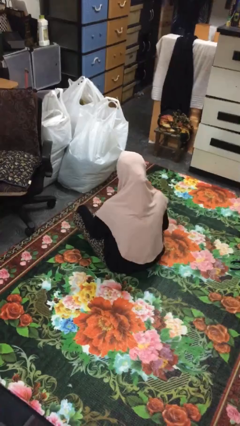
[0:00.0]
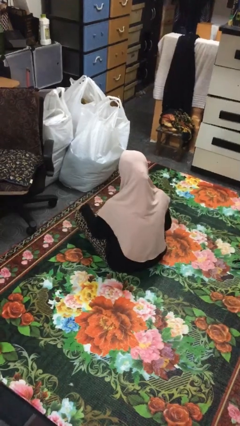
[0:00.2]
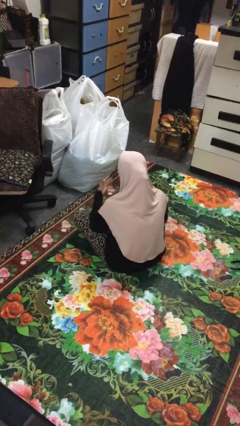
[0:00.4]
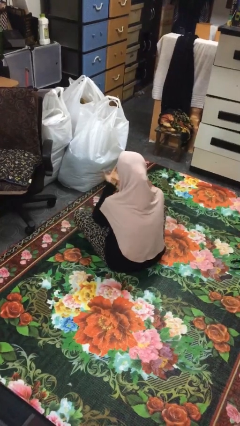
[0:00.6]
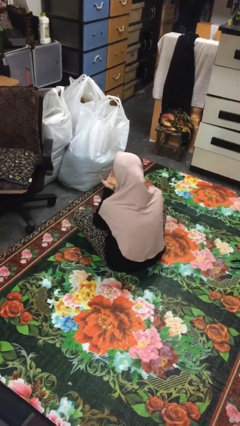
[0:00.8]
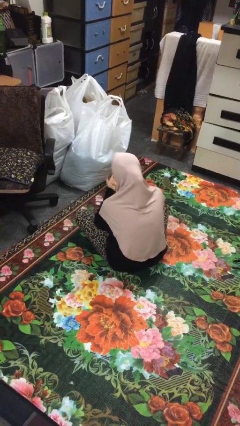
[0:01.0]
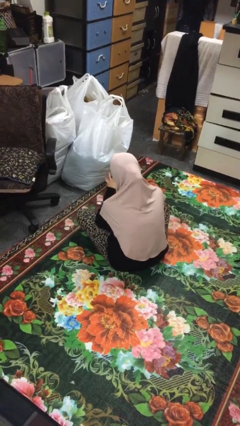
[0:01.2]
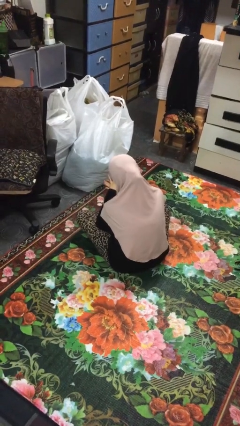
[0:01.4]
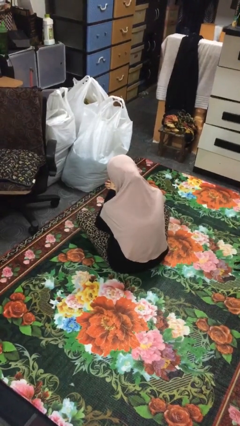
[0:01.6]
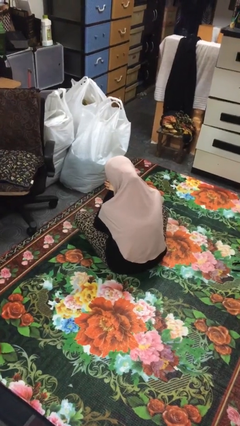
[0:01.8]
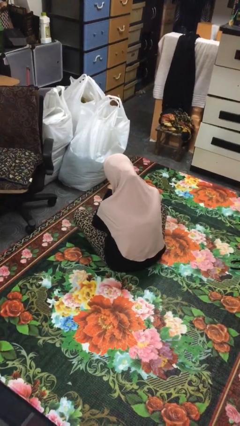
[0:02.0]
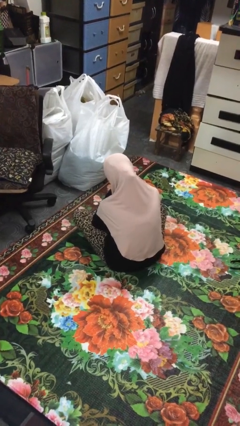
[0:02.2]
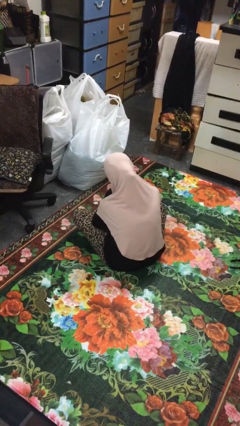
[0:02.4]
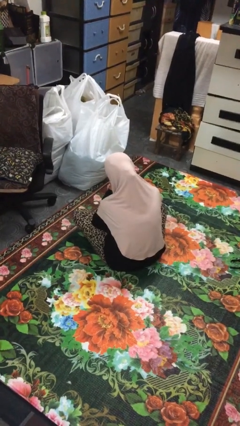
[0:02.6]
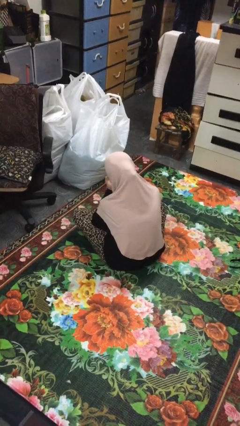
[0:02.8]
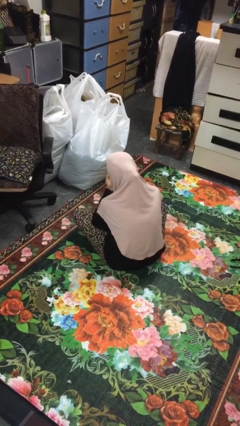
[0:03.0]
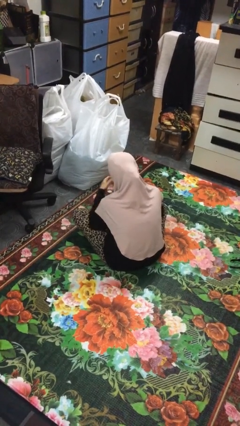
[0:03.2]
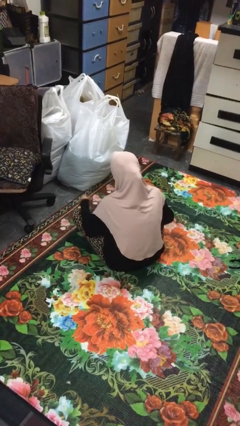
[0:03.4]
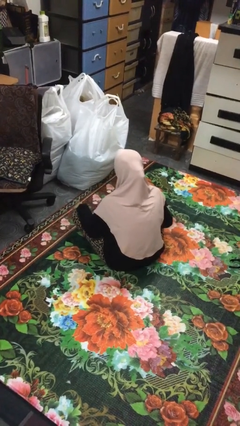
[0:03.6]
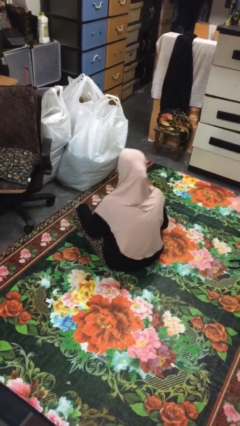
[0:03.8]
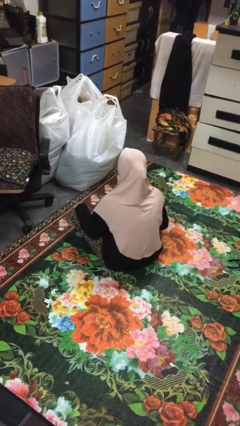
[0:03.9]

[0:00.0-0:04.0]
person looks at hands in lap

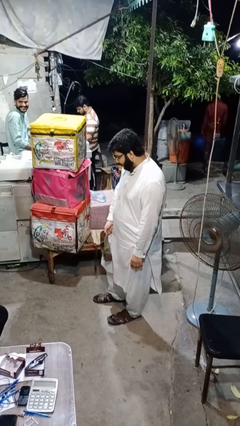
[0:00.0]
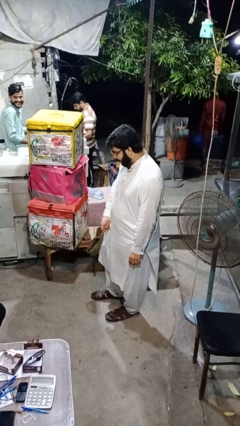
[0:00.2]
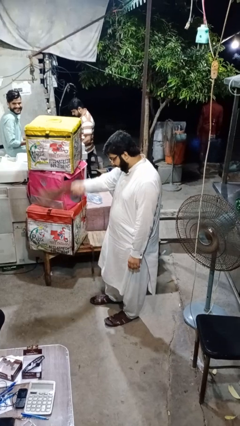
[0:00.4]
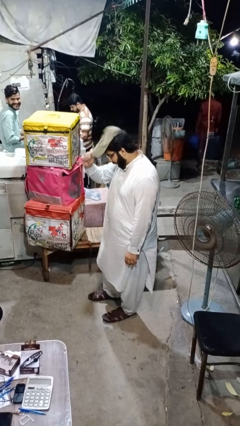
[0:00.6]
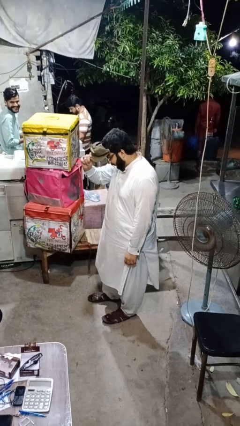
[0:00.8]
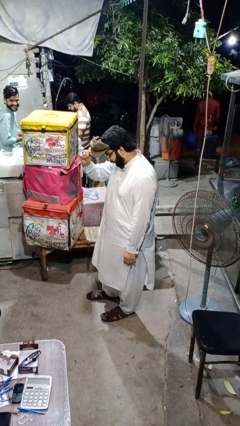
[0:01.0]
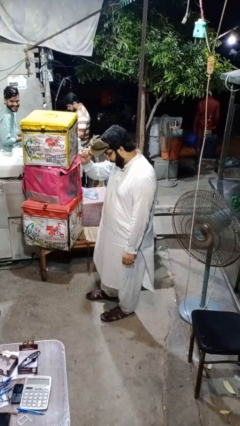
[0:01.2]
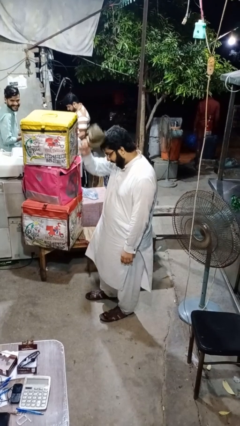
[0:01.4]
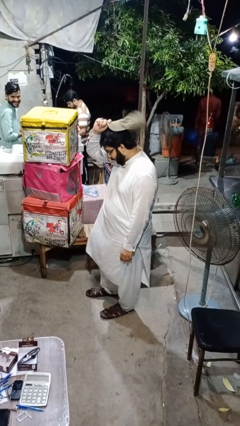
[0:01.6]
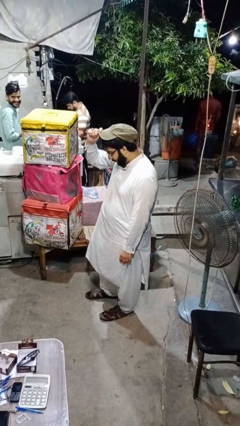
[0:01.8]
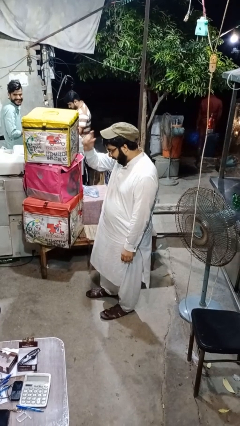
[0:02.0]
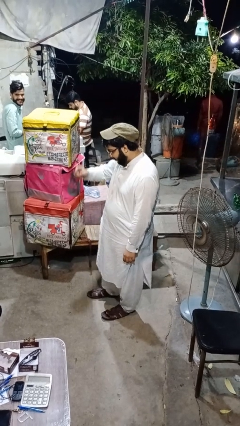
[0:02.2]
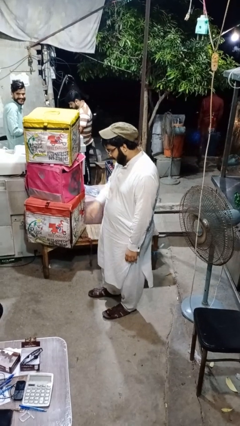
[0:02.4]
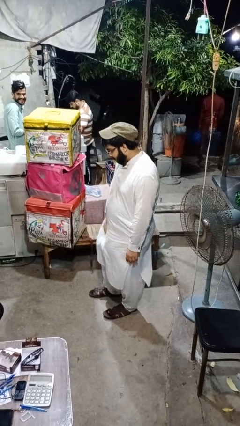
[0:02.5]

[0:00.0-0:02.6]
person puts on hat

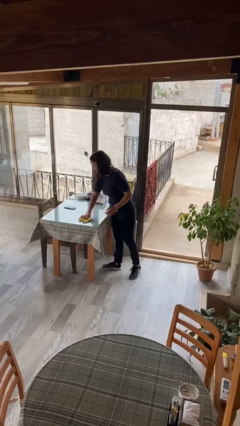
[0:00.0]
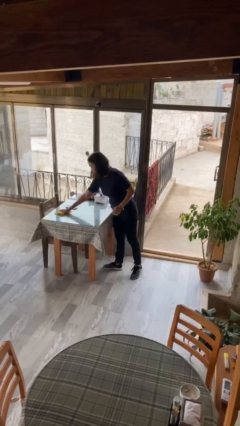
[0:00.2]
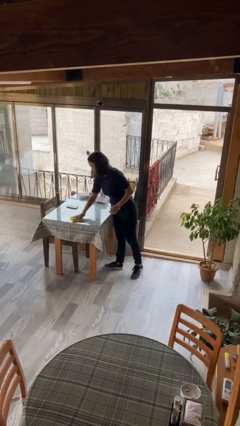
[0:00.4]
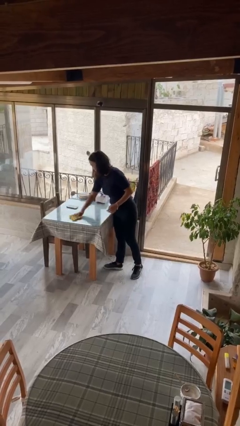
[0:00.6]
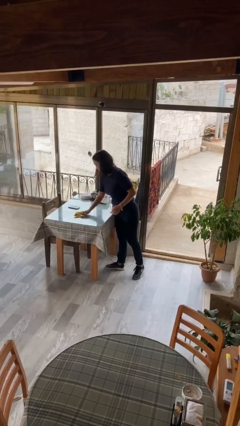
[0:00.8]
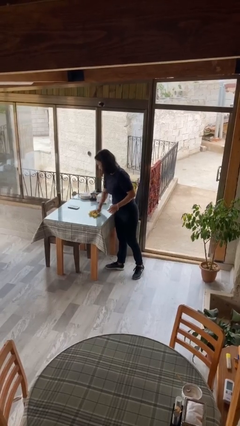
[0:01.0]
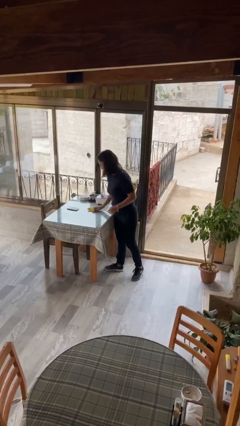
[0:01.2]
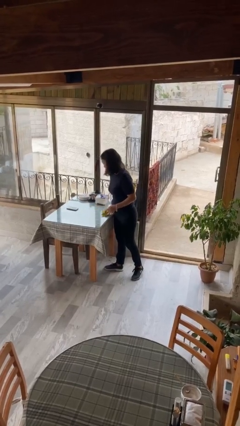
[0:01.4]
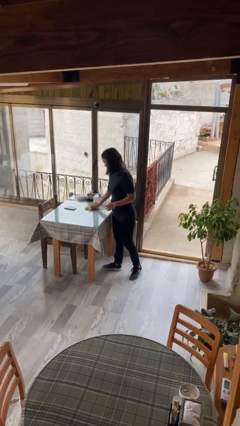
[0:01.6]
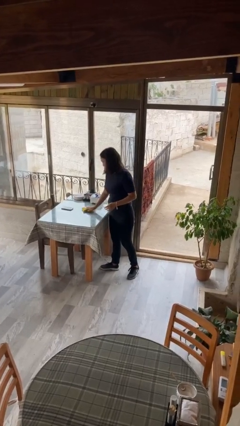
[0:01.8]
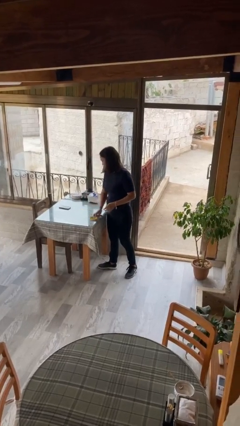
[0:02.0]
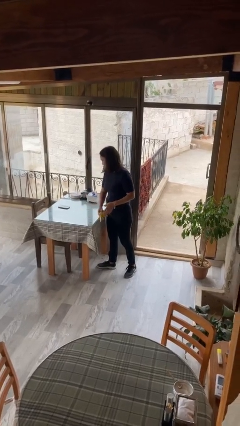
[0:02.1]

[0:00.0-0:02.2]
person cleans table with rag

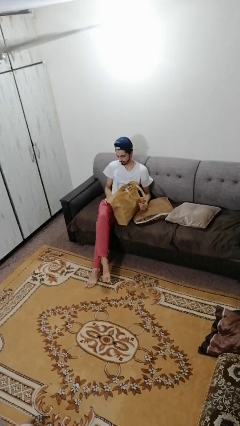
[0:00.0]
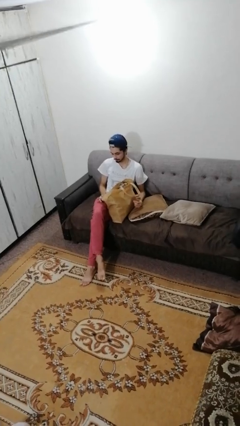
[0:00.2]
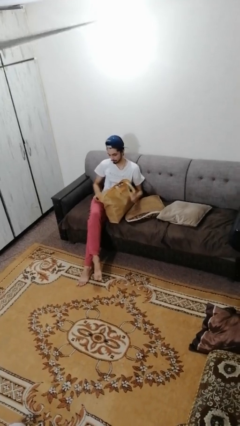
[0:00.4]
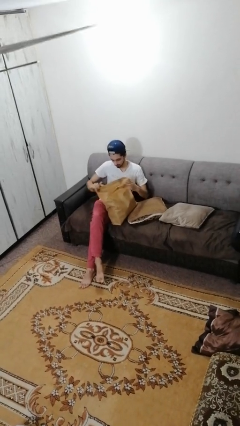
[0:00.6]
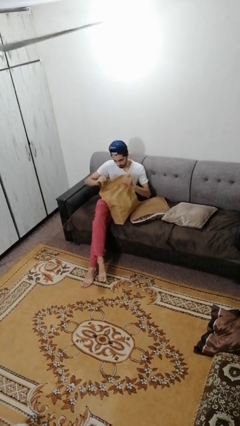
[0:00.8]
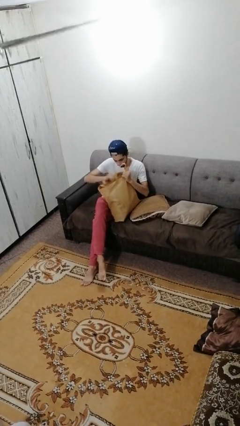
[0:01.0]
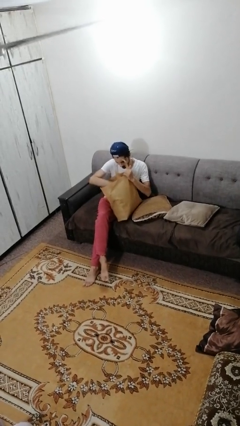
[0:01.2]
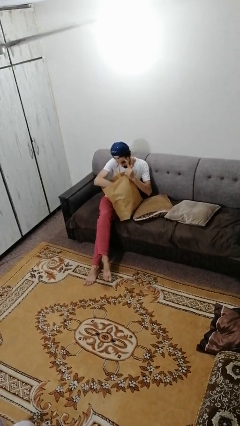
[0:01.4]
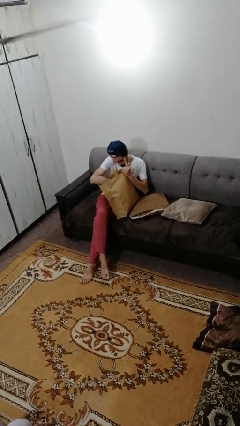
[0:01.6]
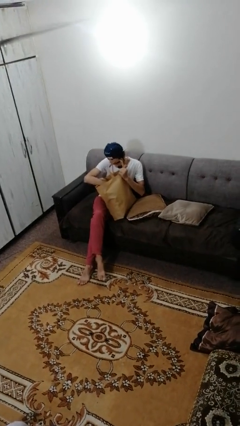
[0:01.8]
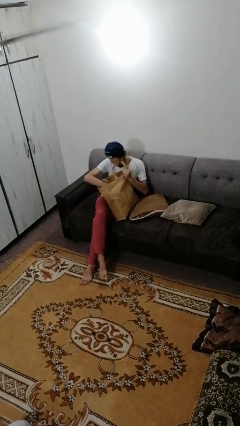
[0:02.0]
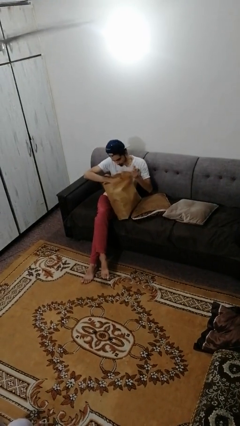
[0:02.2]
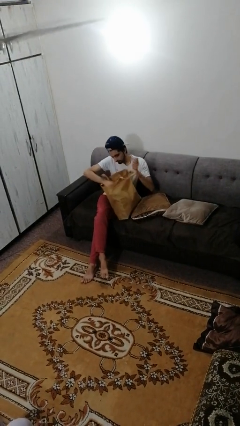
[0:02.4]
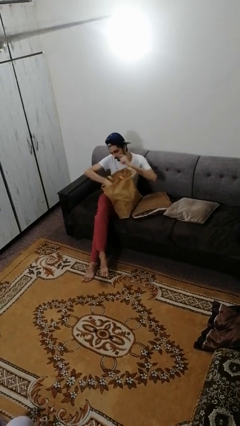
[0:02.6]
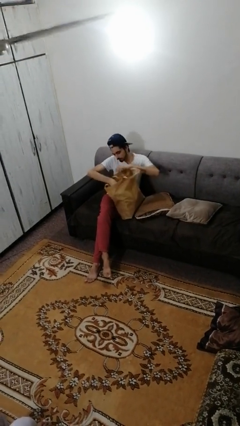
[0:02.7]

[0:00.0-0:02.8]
person searches in bag

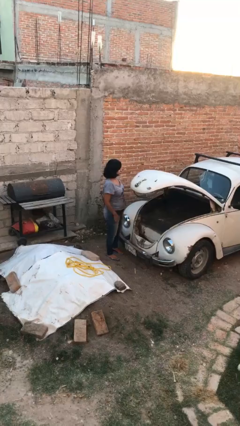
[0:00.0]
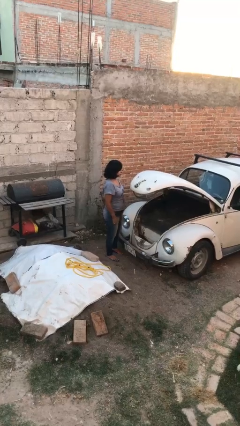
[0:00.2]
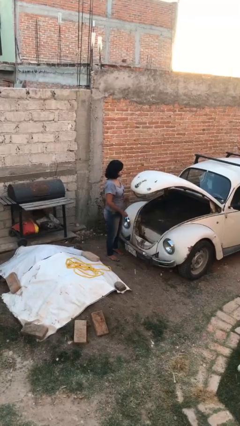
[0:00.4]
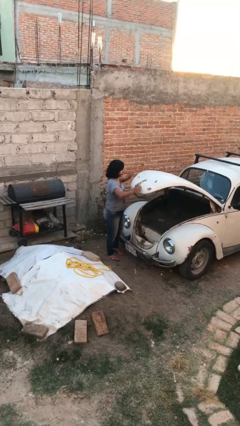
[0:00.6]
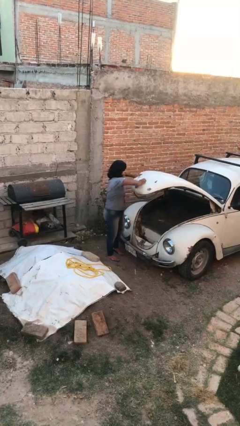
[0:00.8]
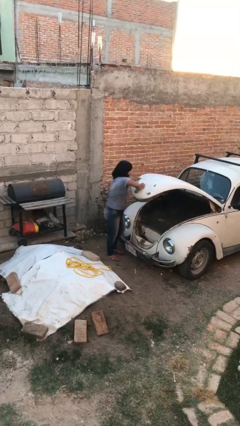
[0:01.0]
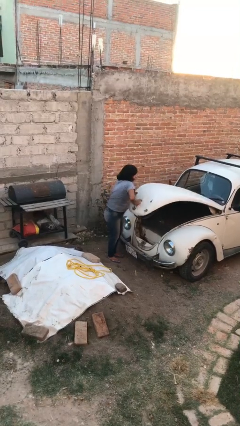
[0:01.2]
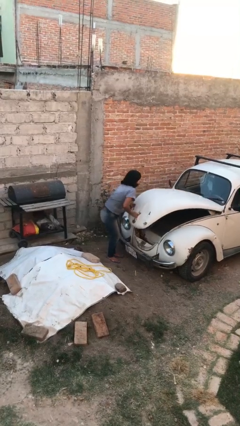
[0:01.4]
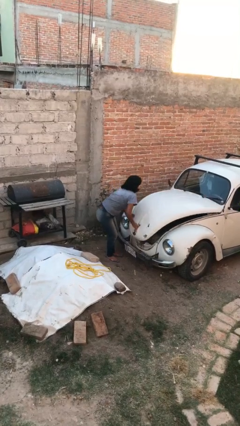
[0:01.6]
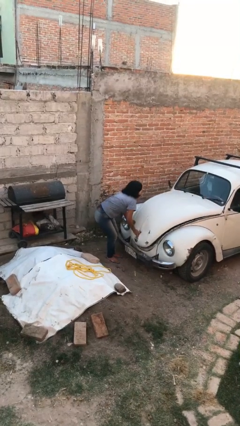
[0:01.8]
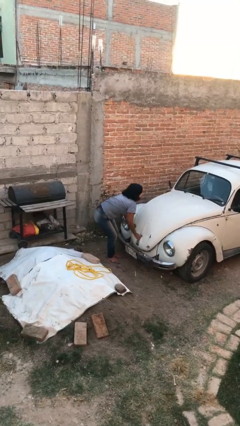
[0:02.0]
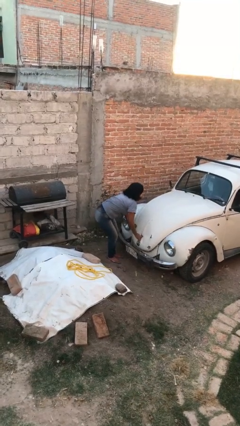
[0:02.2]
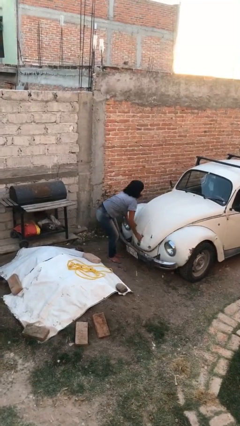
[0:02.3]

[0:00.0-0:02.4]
person closes car trunk

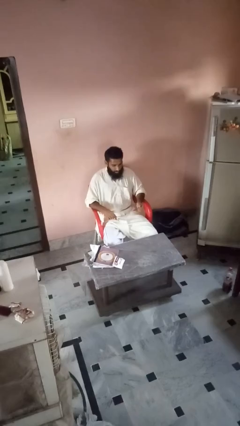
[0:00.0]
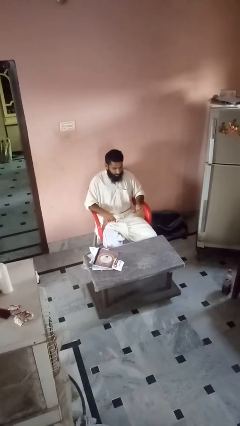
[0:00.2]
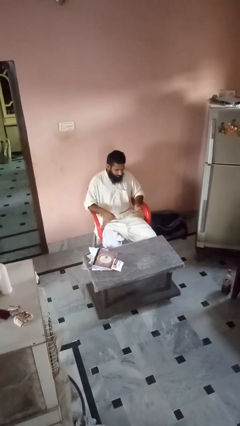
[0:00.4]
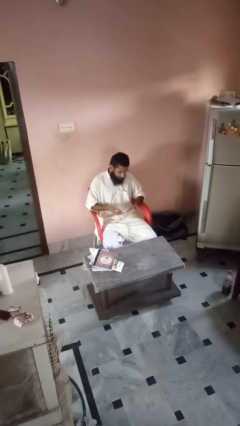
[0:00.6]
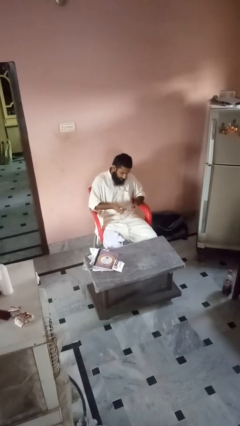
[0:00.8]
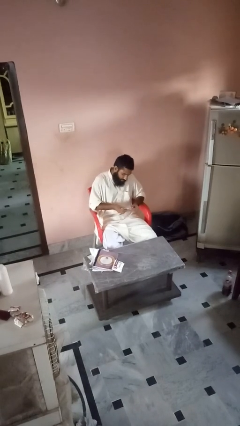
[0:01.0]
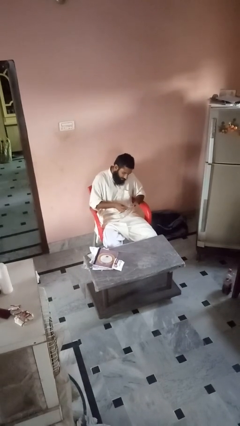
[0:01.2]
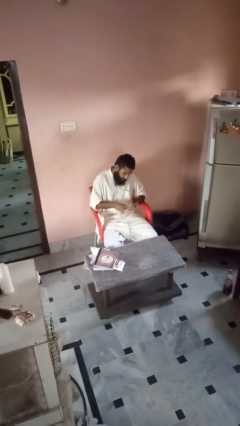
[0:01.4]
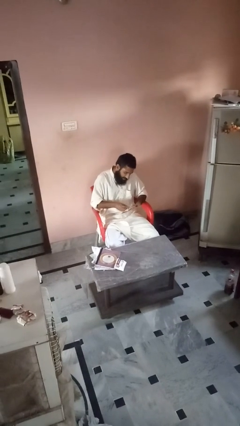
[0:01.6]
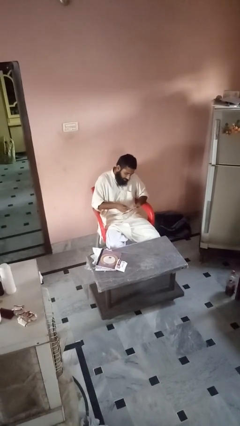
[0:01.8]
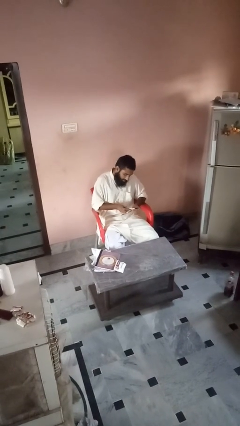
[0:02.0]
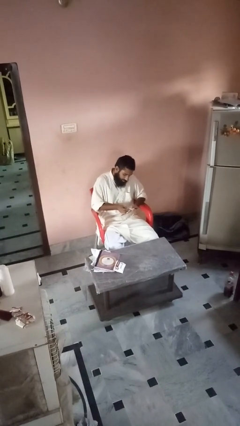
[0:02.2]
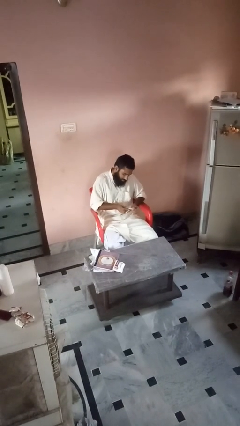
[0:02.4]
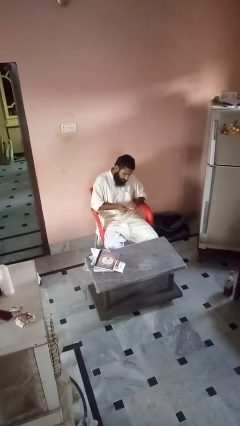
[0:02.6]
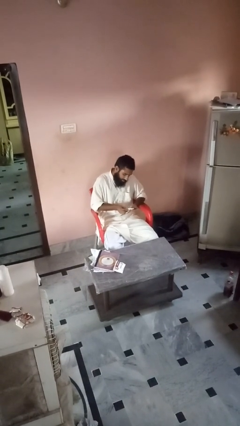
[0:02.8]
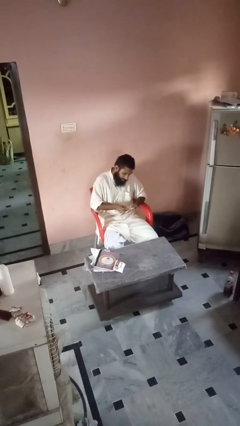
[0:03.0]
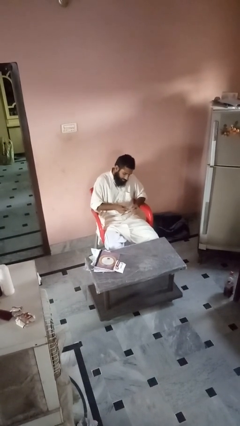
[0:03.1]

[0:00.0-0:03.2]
person files fingernails

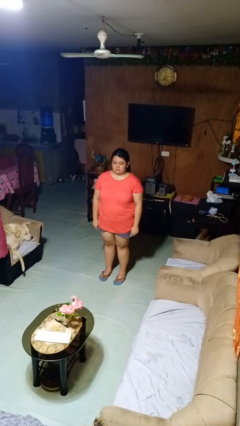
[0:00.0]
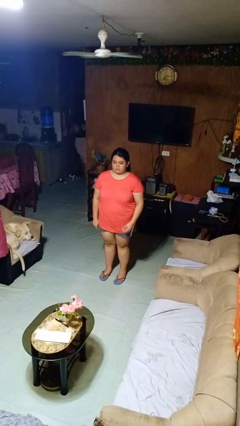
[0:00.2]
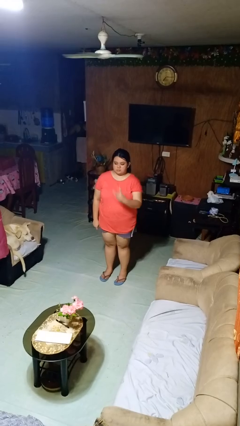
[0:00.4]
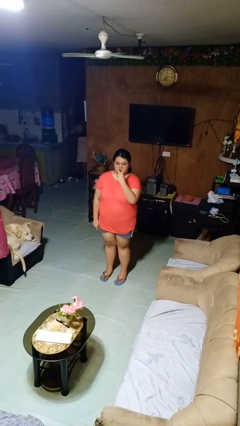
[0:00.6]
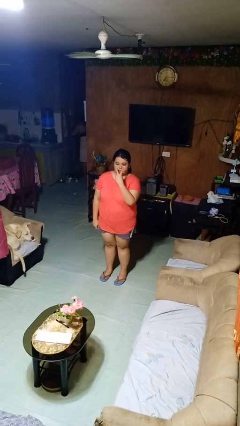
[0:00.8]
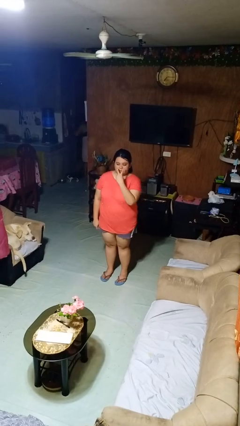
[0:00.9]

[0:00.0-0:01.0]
person gestures watch closely
